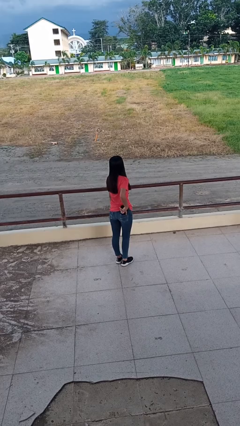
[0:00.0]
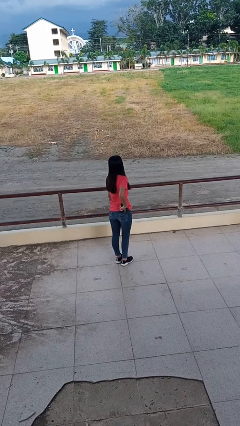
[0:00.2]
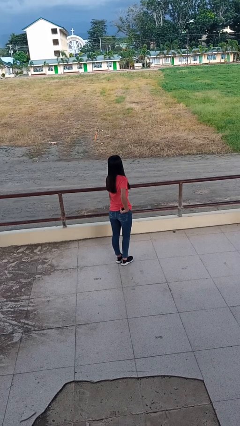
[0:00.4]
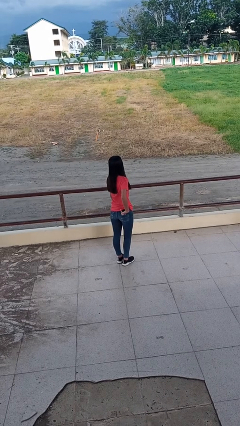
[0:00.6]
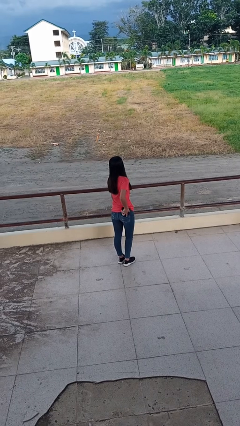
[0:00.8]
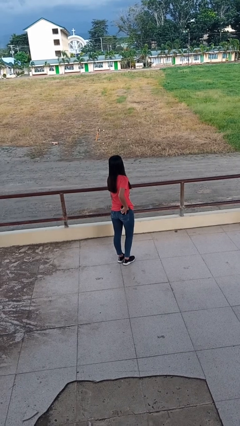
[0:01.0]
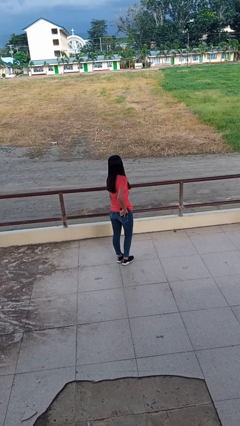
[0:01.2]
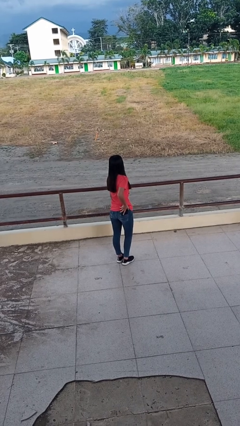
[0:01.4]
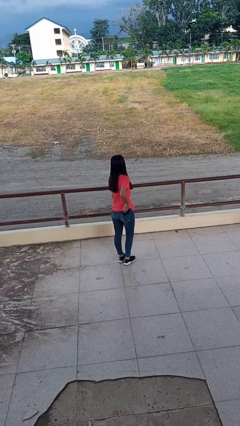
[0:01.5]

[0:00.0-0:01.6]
person puts phone into pocket

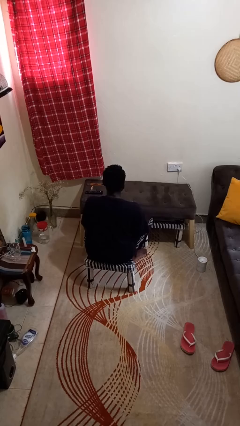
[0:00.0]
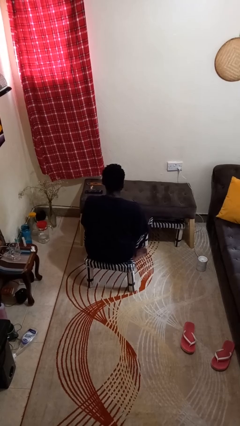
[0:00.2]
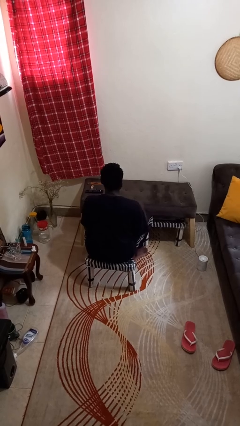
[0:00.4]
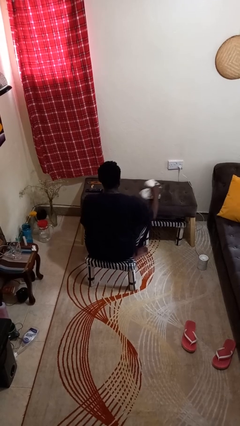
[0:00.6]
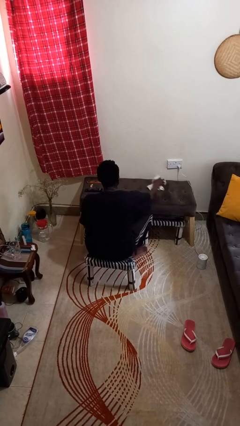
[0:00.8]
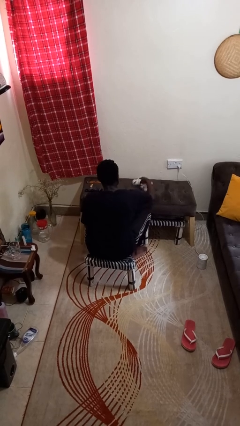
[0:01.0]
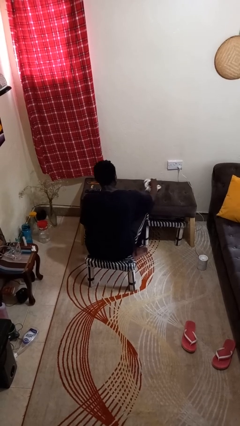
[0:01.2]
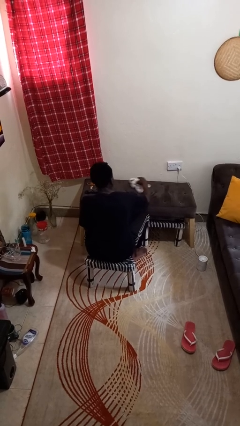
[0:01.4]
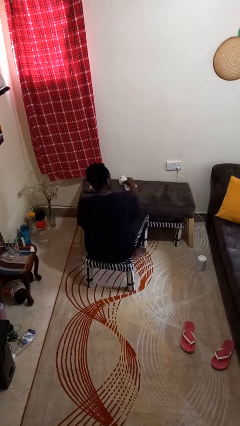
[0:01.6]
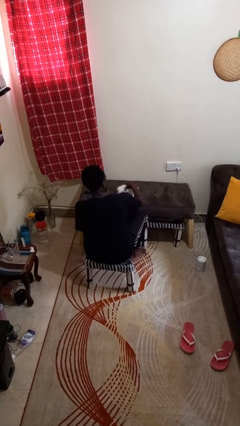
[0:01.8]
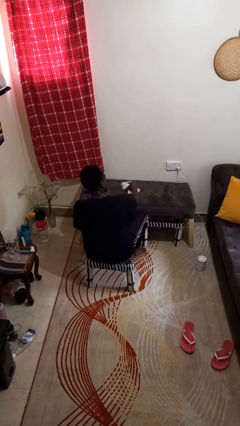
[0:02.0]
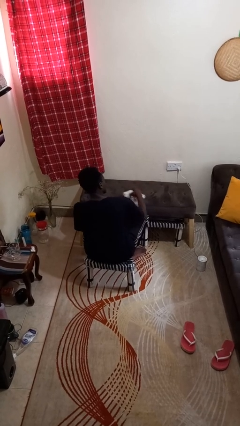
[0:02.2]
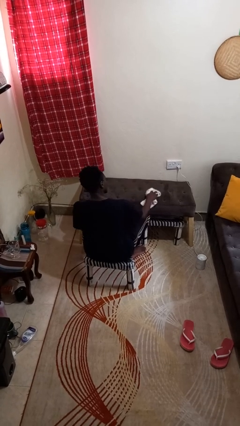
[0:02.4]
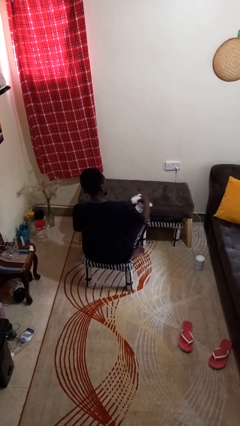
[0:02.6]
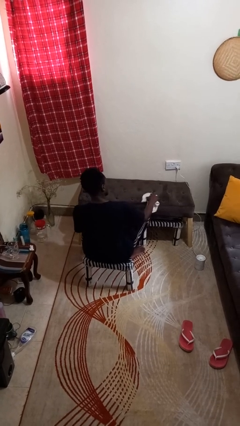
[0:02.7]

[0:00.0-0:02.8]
person cleans table with rag

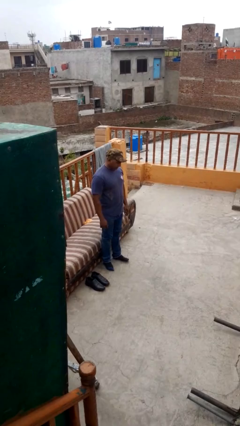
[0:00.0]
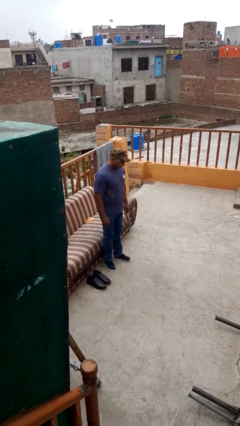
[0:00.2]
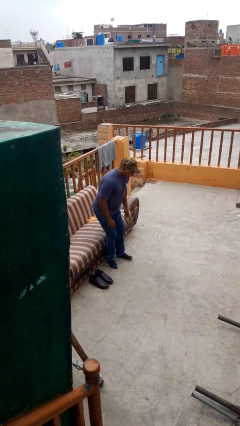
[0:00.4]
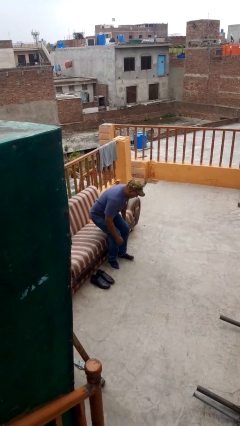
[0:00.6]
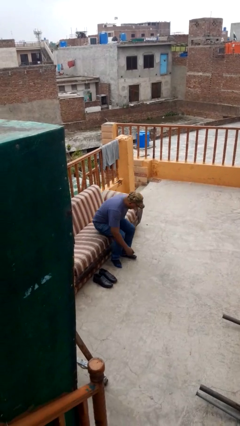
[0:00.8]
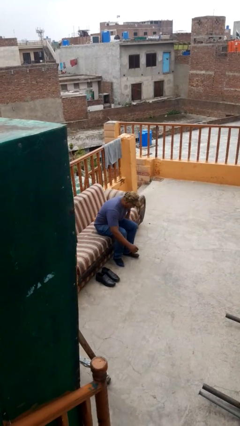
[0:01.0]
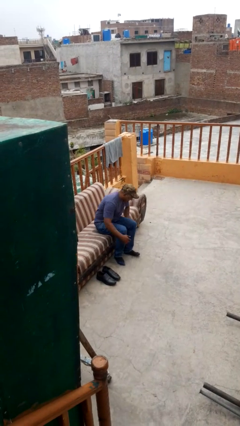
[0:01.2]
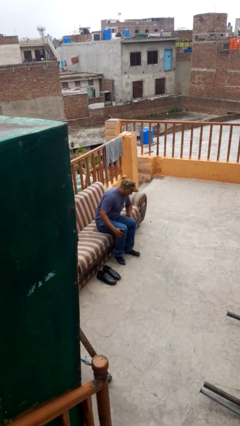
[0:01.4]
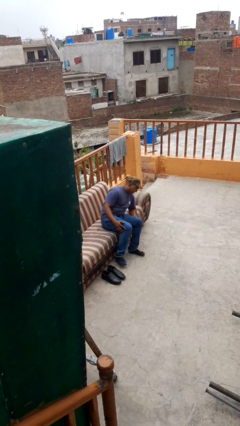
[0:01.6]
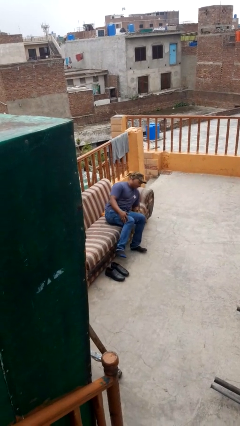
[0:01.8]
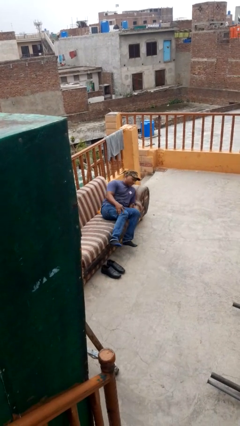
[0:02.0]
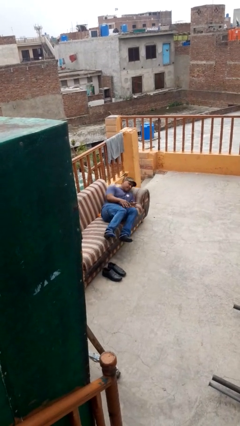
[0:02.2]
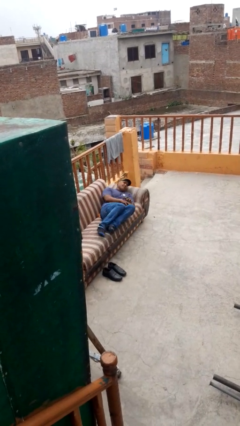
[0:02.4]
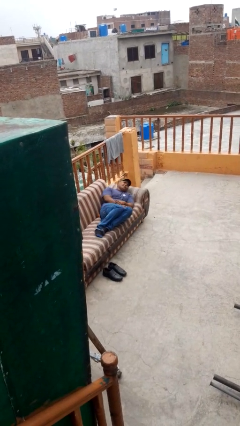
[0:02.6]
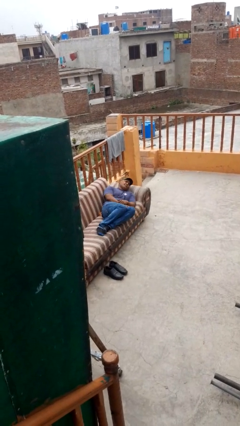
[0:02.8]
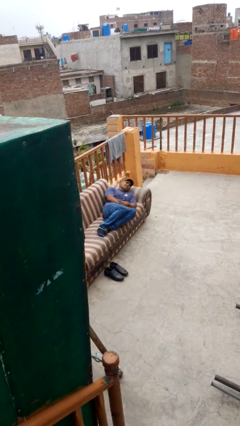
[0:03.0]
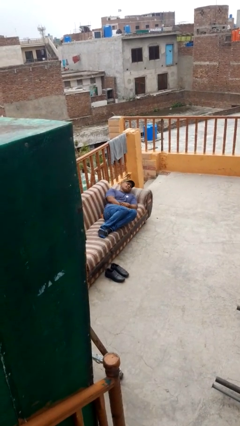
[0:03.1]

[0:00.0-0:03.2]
person lies down on couch

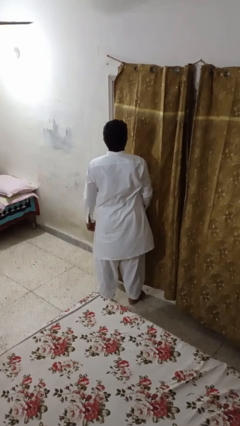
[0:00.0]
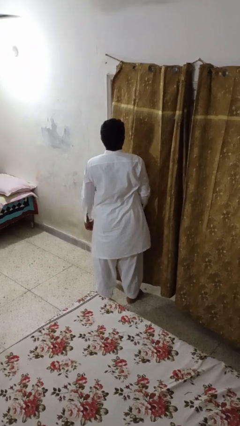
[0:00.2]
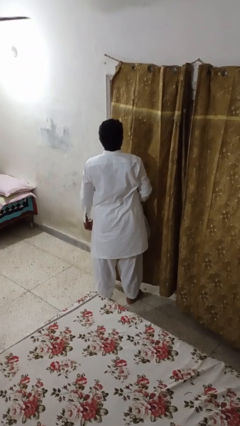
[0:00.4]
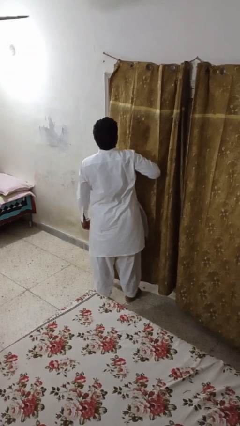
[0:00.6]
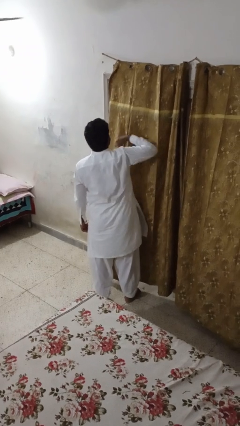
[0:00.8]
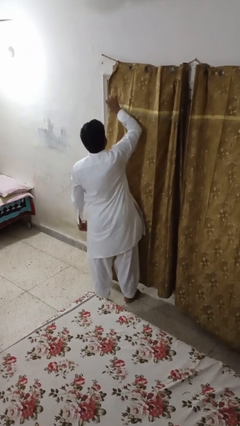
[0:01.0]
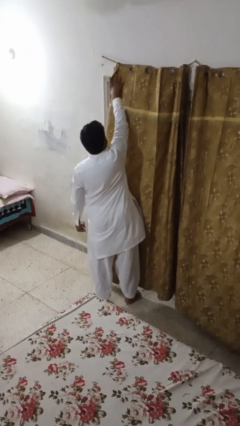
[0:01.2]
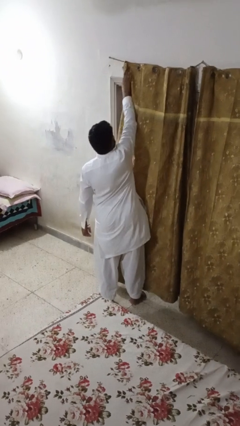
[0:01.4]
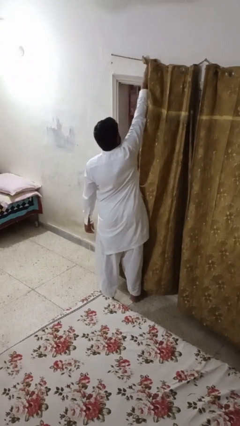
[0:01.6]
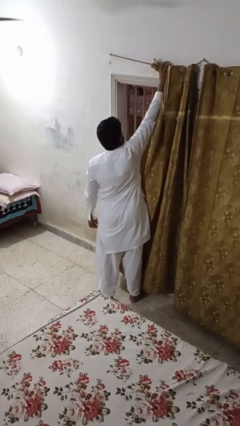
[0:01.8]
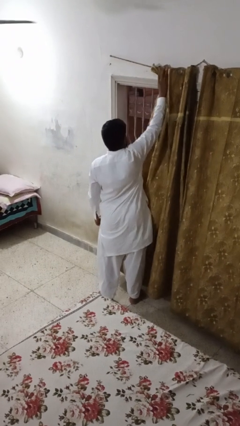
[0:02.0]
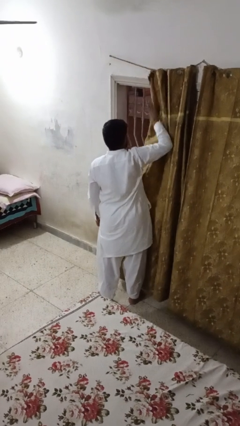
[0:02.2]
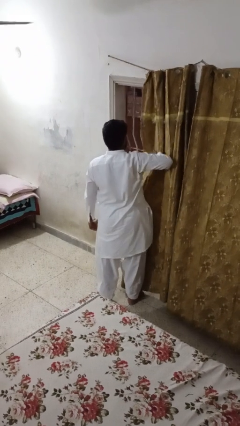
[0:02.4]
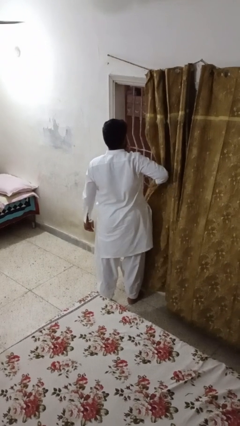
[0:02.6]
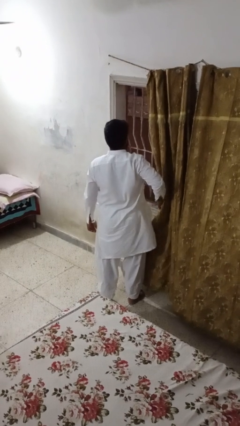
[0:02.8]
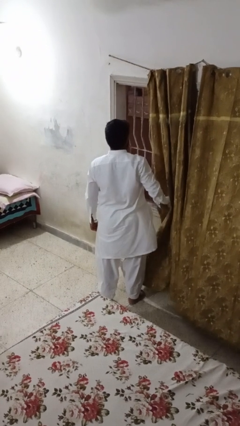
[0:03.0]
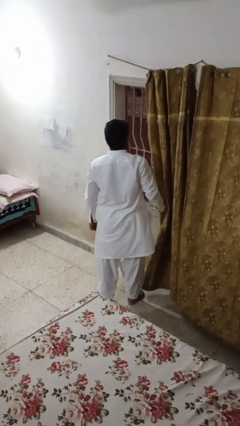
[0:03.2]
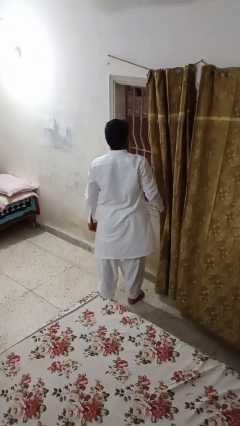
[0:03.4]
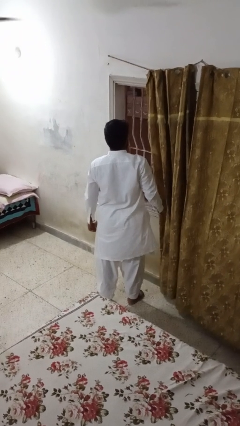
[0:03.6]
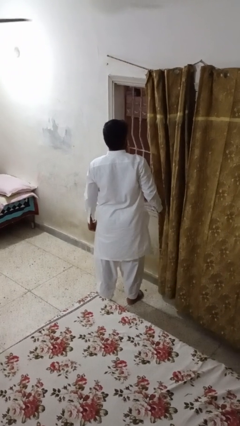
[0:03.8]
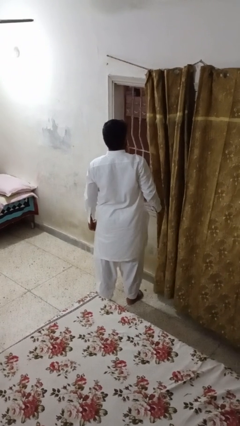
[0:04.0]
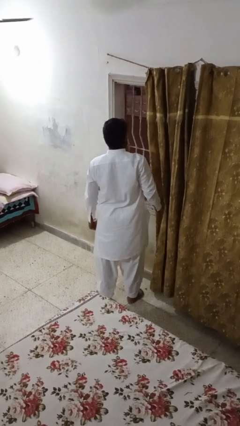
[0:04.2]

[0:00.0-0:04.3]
person opens curtains

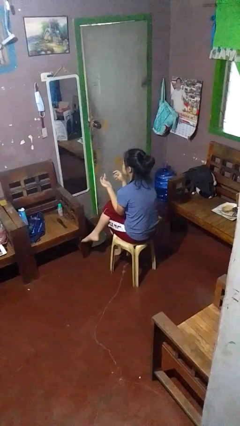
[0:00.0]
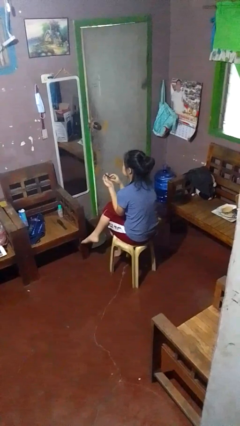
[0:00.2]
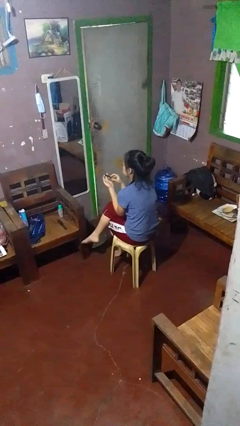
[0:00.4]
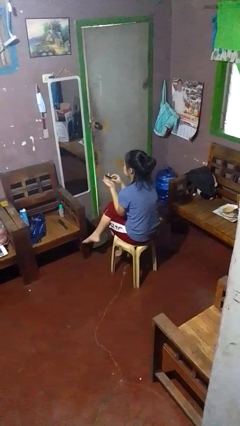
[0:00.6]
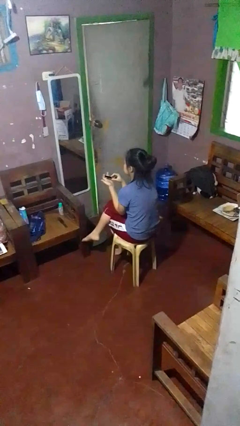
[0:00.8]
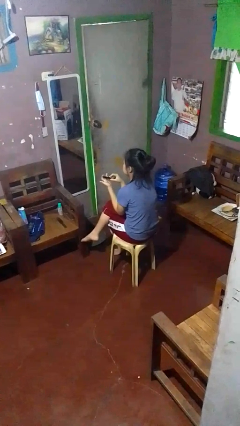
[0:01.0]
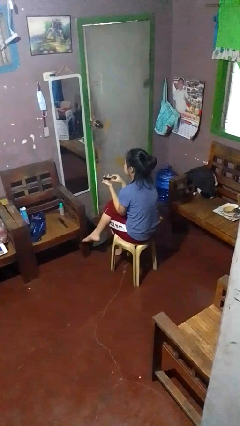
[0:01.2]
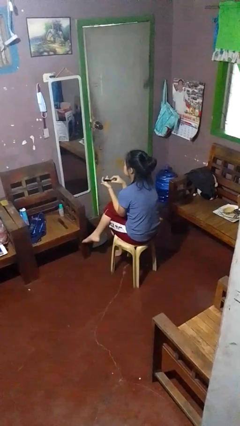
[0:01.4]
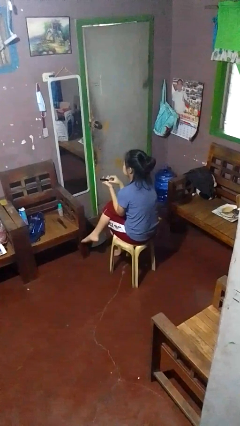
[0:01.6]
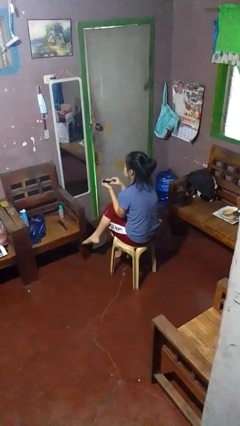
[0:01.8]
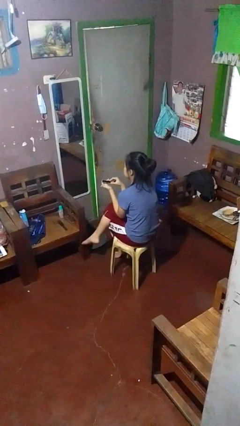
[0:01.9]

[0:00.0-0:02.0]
person files fingernails

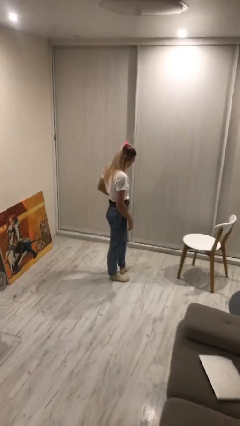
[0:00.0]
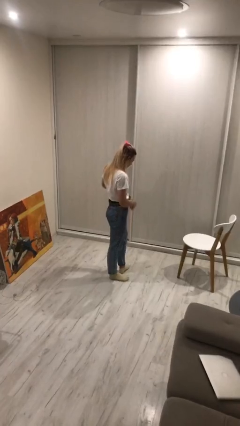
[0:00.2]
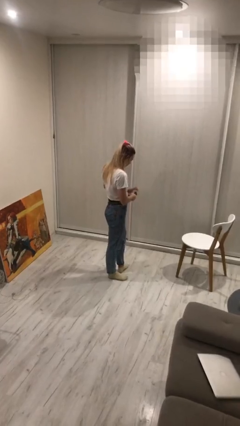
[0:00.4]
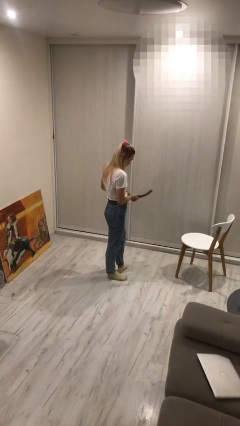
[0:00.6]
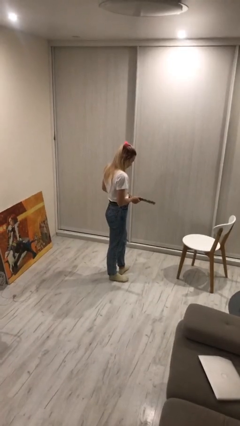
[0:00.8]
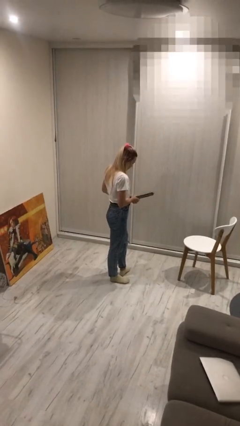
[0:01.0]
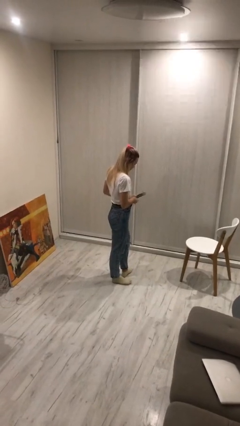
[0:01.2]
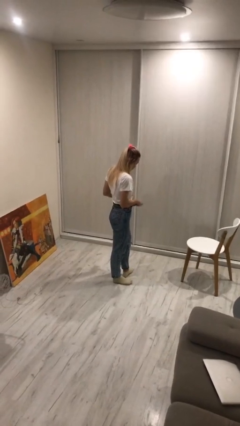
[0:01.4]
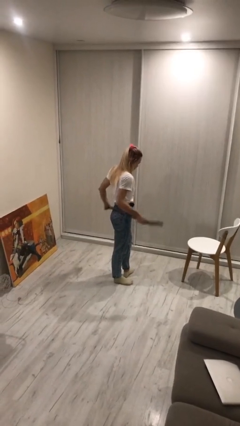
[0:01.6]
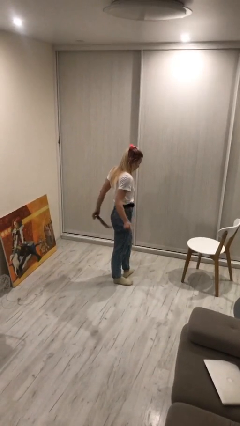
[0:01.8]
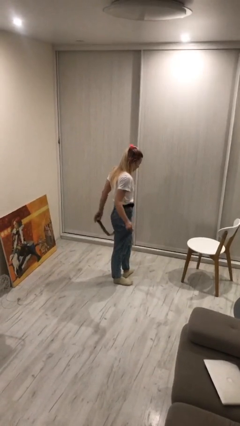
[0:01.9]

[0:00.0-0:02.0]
person takes off belt

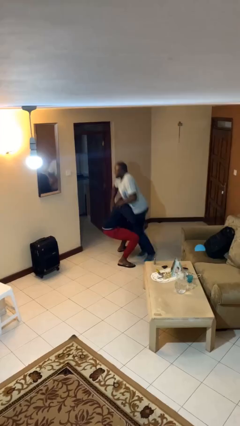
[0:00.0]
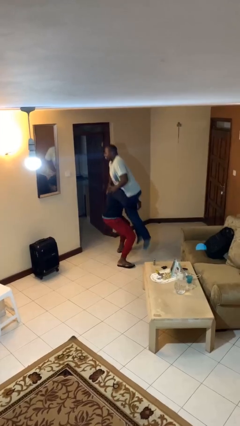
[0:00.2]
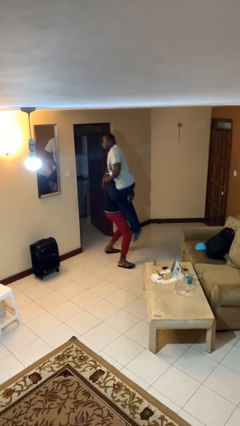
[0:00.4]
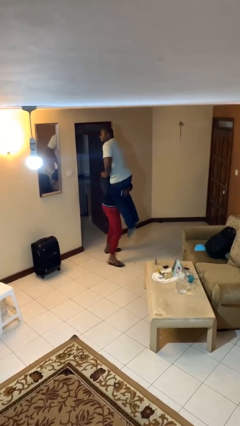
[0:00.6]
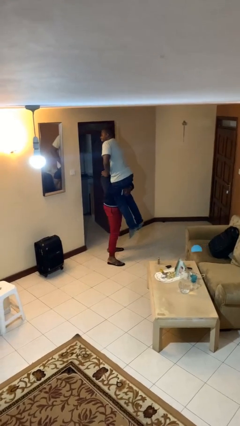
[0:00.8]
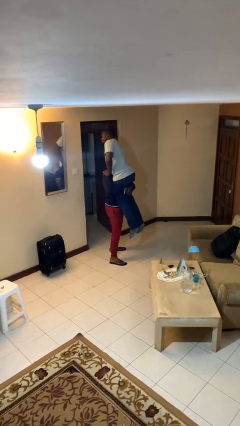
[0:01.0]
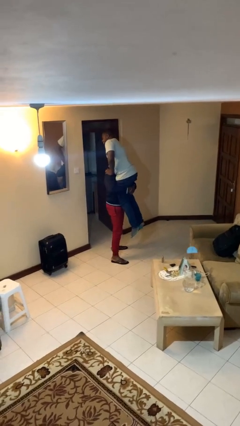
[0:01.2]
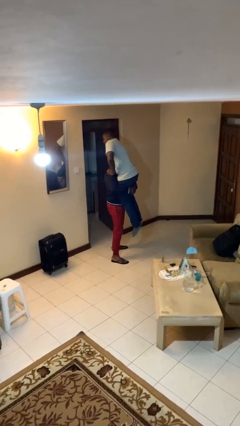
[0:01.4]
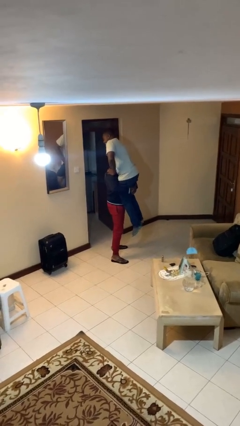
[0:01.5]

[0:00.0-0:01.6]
person picks up person
